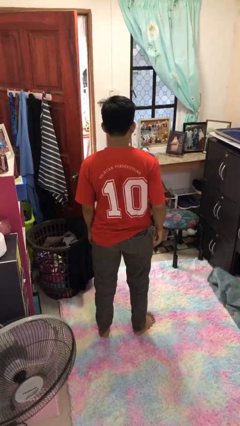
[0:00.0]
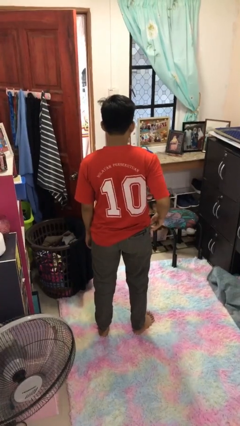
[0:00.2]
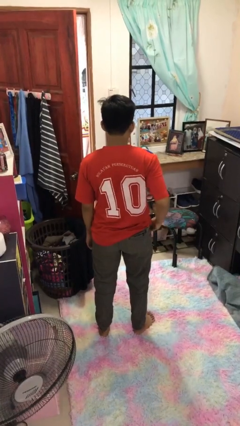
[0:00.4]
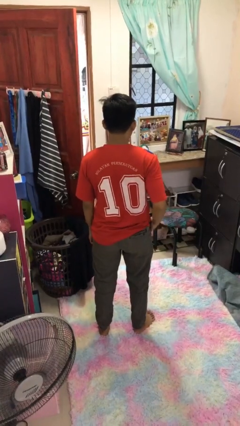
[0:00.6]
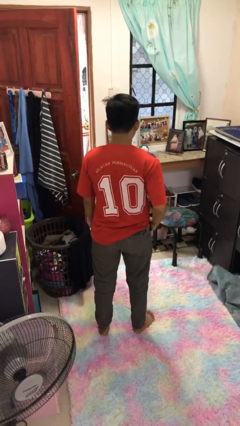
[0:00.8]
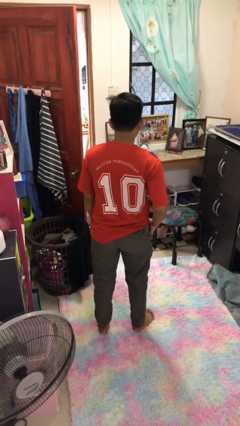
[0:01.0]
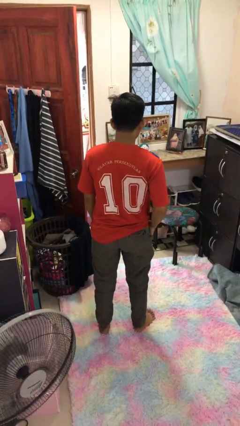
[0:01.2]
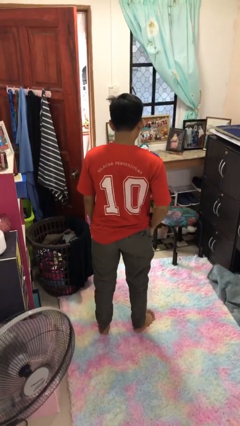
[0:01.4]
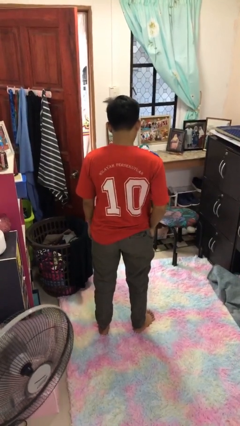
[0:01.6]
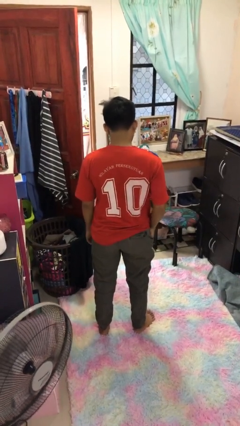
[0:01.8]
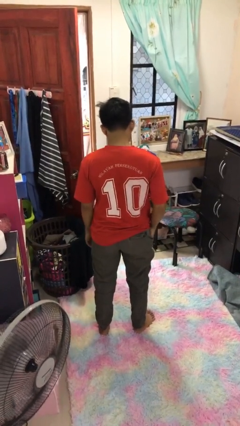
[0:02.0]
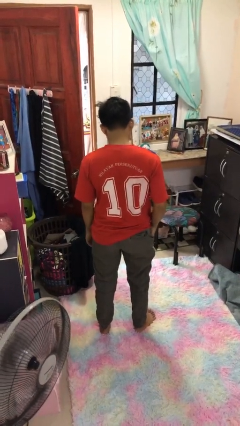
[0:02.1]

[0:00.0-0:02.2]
person puts hands in back pockets

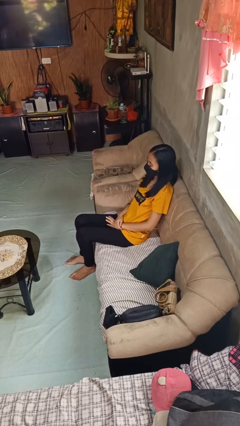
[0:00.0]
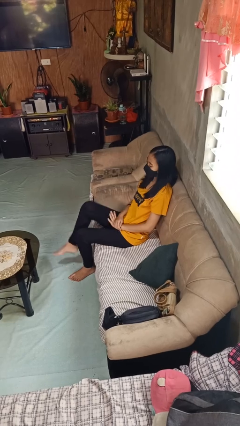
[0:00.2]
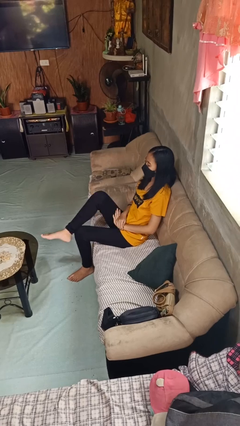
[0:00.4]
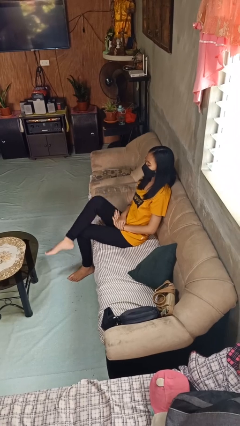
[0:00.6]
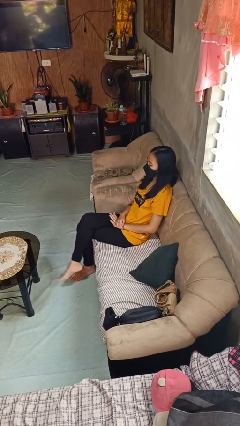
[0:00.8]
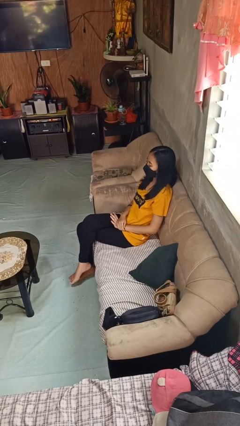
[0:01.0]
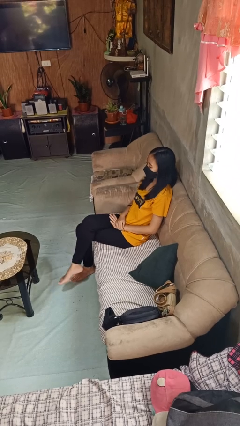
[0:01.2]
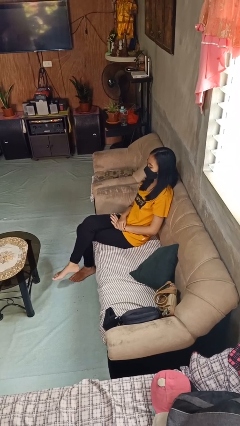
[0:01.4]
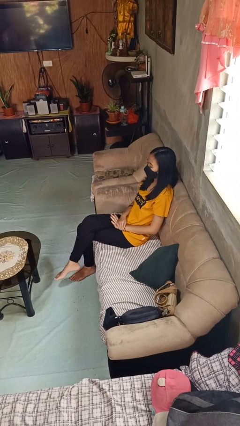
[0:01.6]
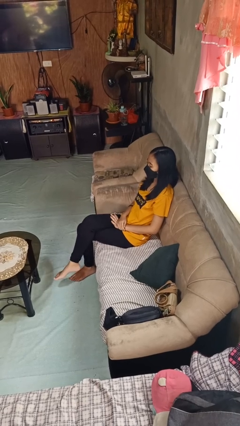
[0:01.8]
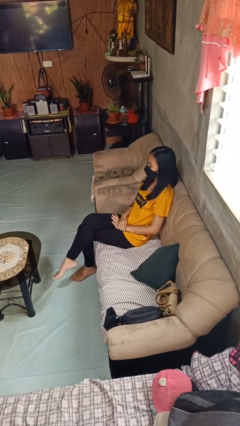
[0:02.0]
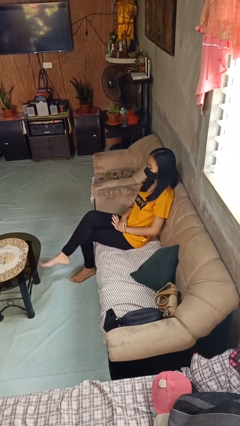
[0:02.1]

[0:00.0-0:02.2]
person crosses legs

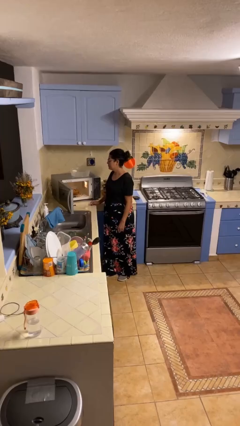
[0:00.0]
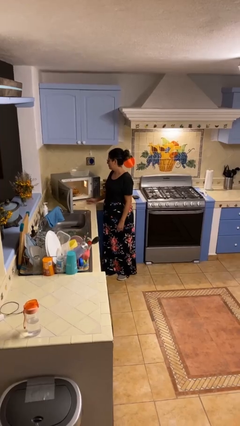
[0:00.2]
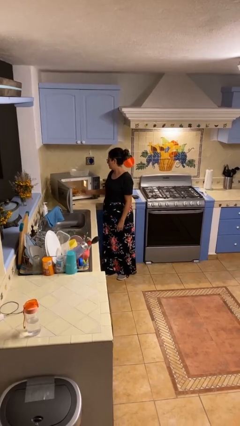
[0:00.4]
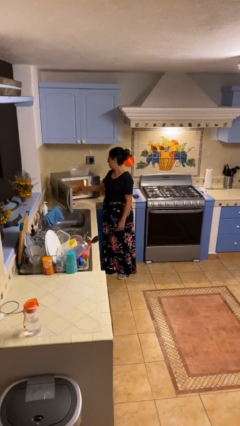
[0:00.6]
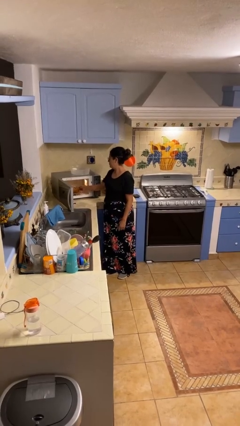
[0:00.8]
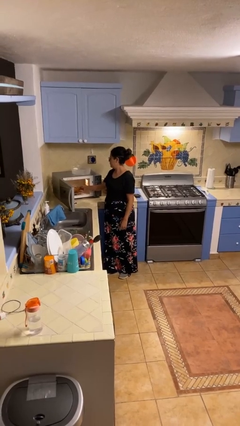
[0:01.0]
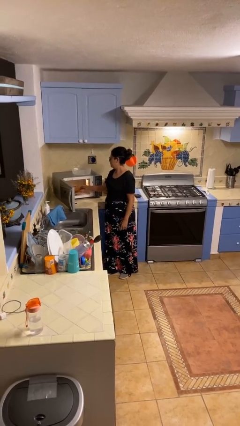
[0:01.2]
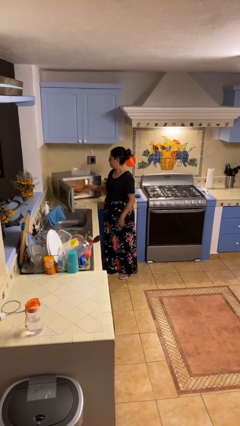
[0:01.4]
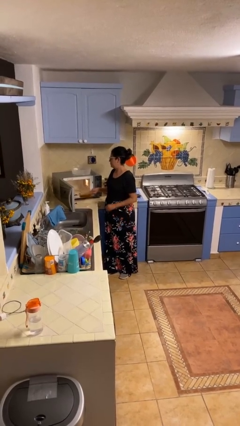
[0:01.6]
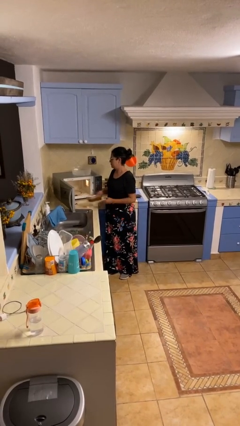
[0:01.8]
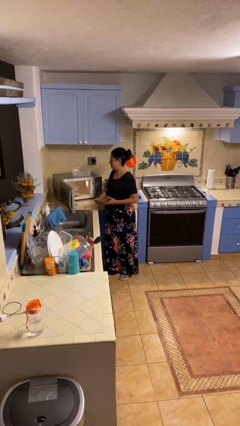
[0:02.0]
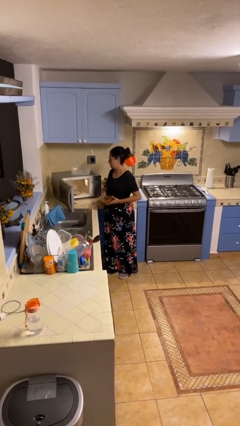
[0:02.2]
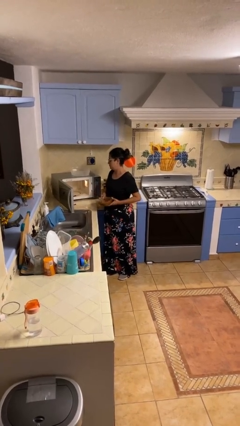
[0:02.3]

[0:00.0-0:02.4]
person takes object from microwave

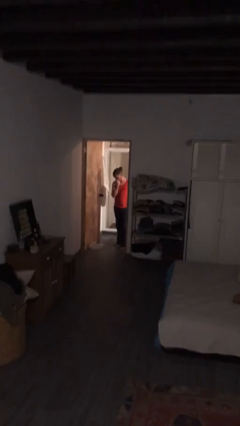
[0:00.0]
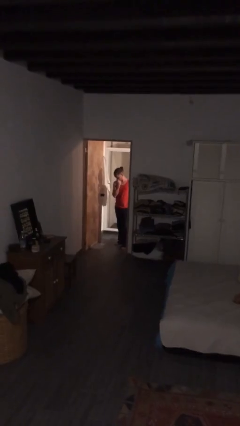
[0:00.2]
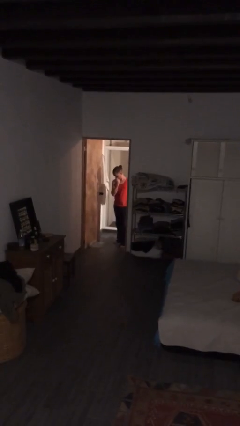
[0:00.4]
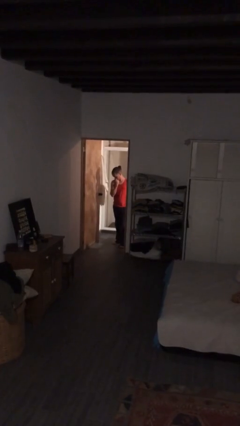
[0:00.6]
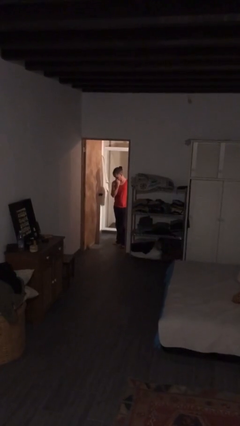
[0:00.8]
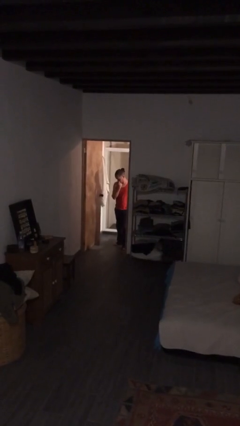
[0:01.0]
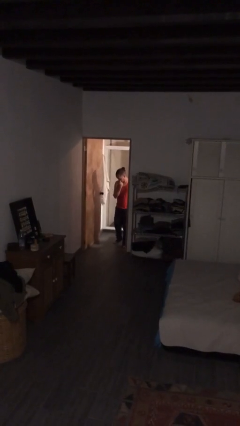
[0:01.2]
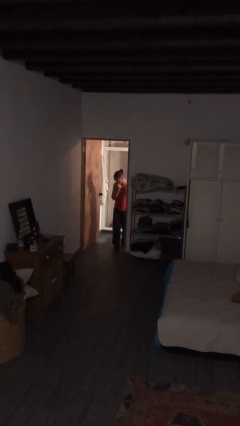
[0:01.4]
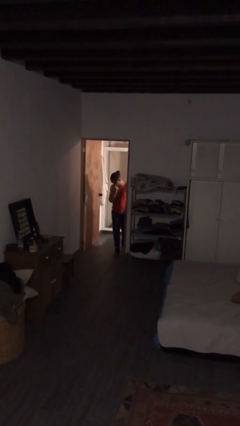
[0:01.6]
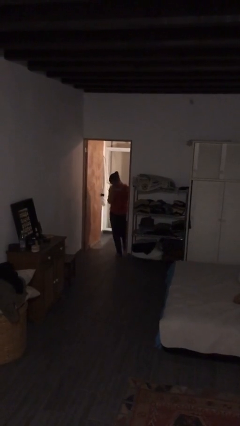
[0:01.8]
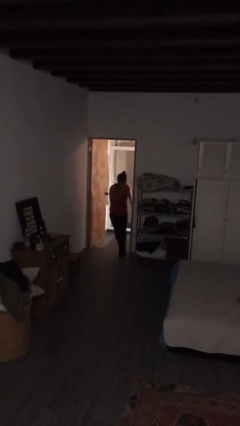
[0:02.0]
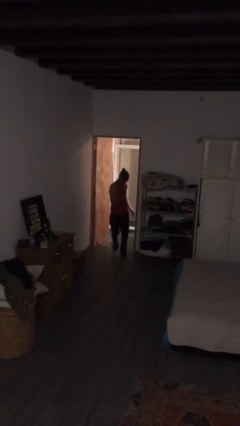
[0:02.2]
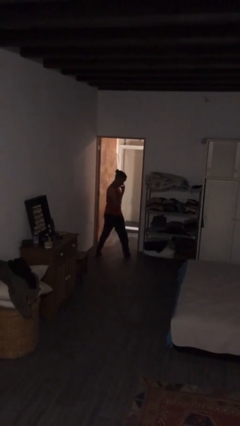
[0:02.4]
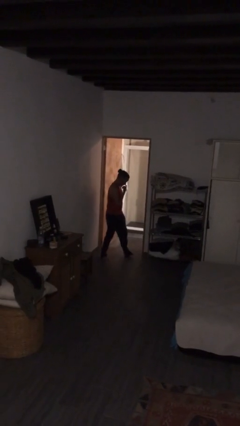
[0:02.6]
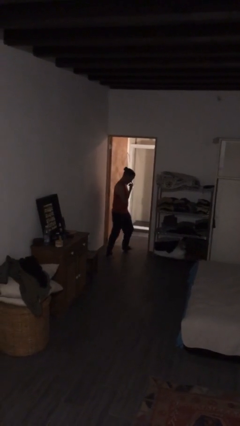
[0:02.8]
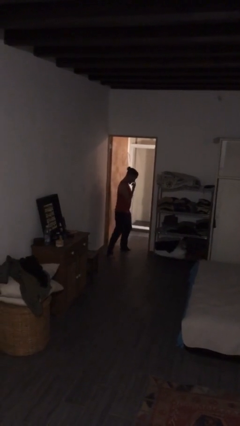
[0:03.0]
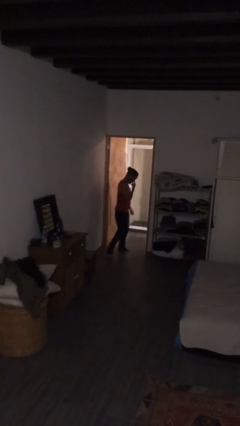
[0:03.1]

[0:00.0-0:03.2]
person bumps into wall

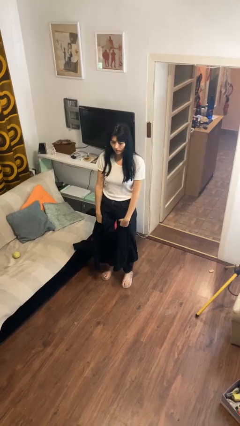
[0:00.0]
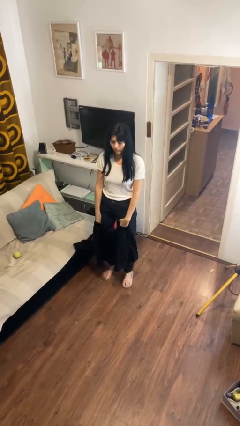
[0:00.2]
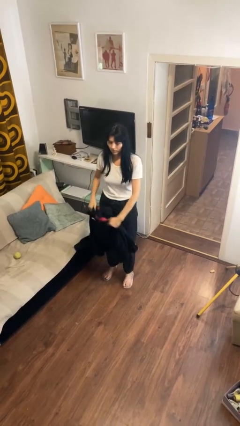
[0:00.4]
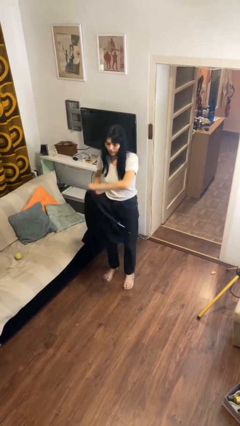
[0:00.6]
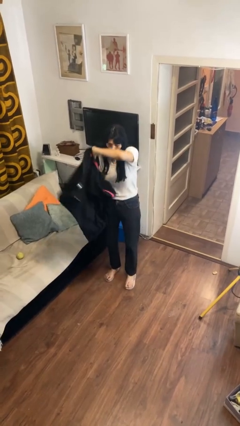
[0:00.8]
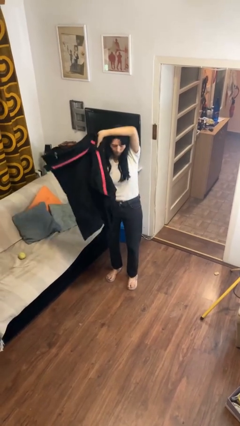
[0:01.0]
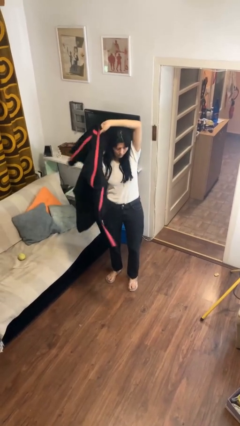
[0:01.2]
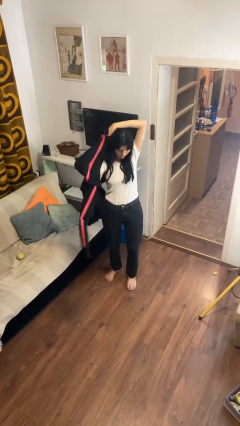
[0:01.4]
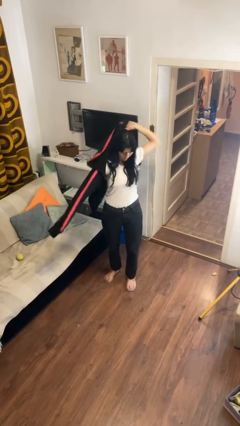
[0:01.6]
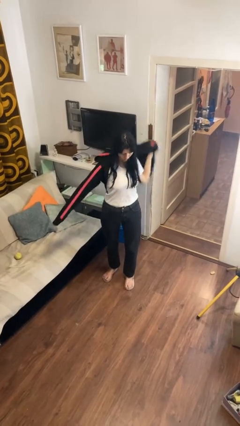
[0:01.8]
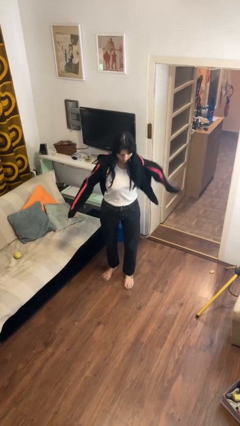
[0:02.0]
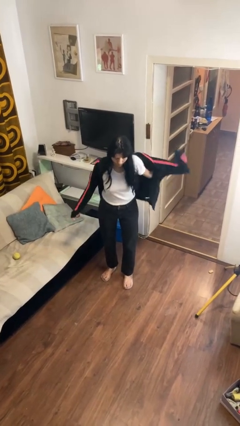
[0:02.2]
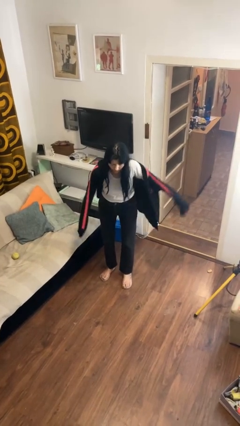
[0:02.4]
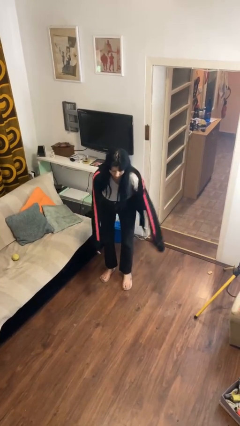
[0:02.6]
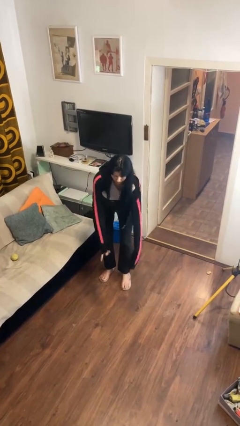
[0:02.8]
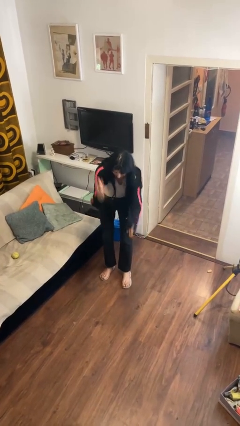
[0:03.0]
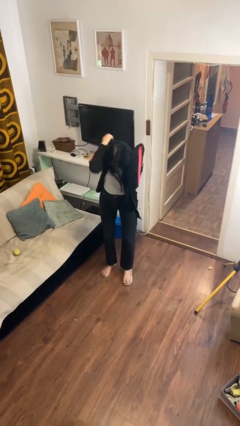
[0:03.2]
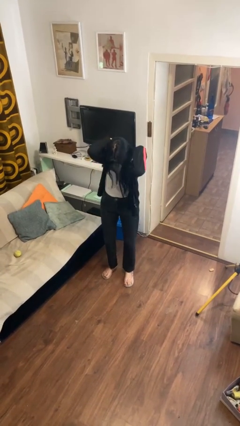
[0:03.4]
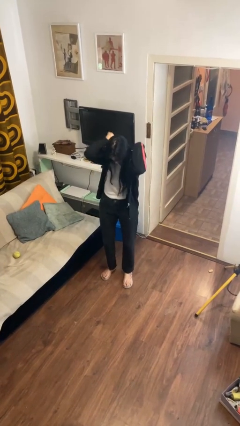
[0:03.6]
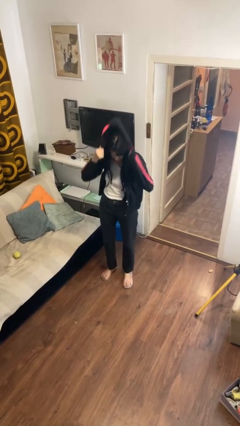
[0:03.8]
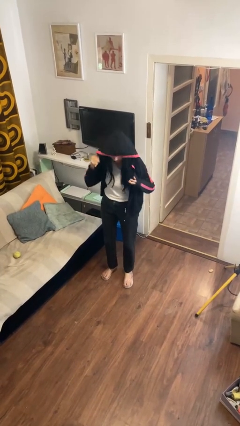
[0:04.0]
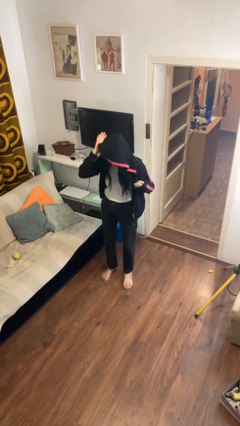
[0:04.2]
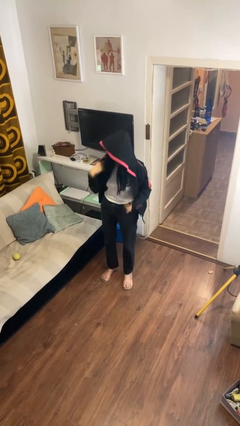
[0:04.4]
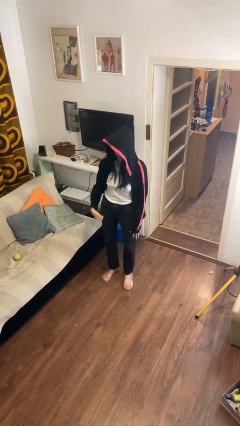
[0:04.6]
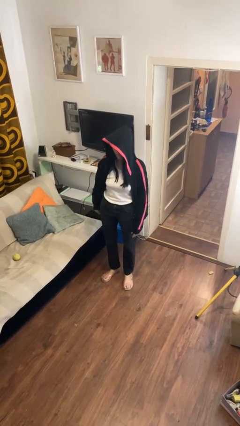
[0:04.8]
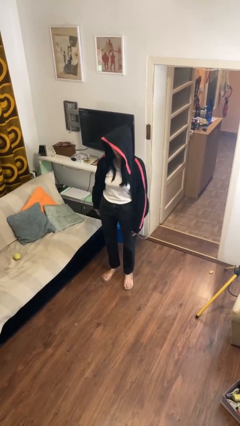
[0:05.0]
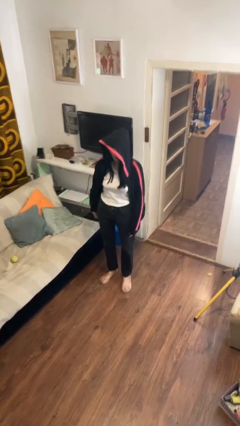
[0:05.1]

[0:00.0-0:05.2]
person puts on hoodie

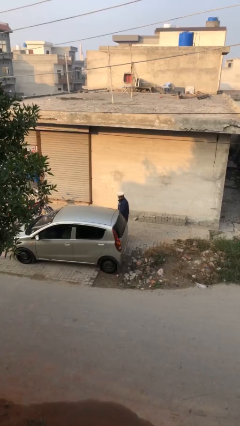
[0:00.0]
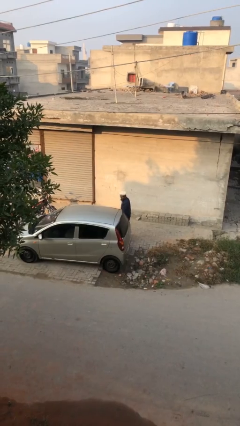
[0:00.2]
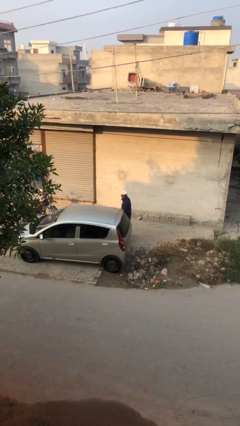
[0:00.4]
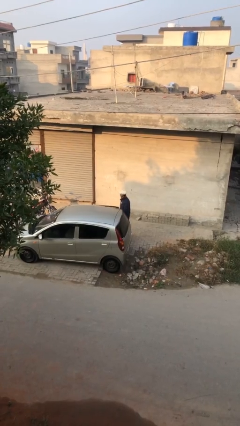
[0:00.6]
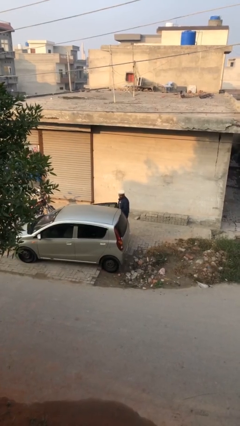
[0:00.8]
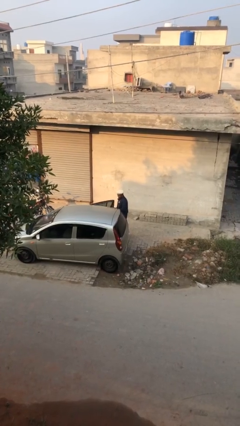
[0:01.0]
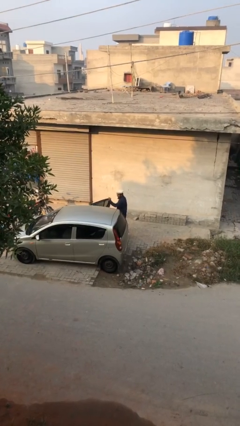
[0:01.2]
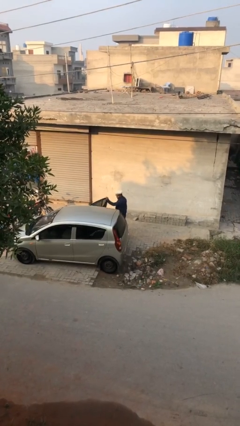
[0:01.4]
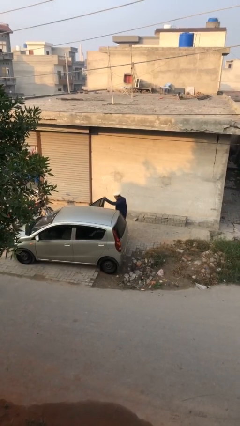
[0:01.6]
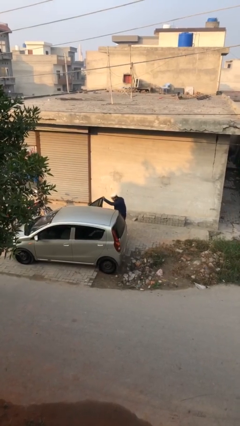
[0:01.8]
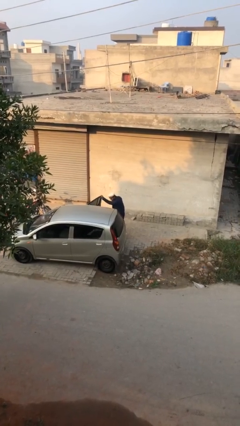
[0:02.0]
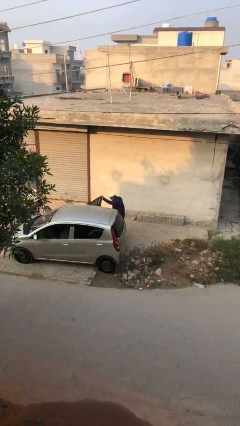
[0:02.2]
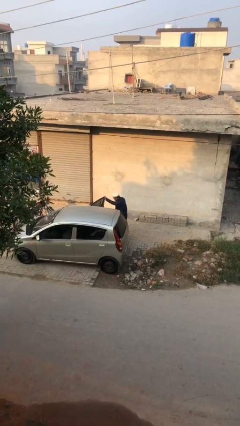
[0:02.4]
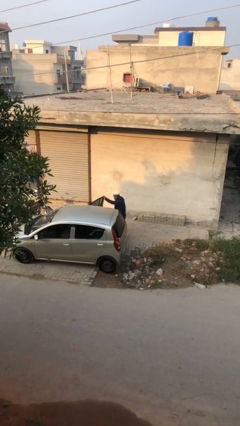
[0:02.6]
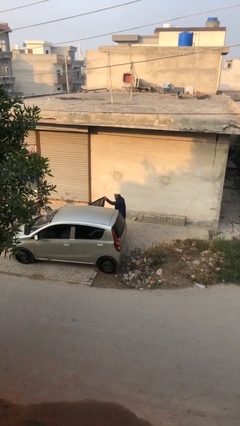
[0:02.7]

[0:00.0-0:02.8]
person opens car door
